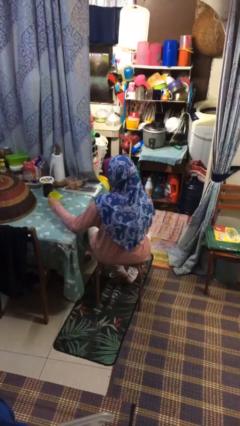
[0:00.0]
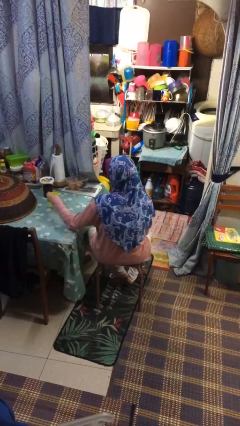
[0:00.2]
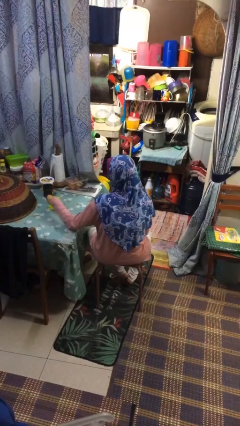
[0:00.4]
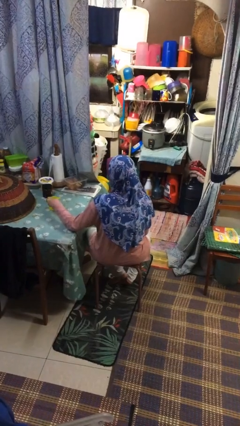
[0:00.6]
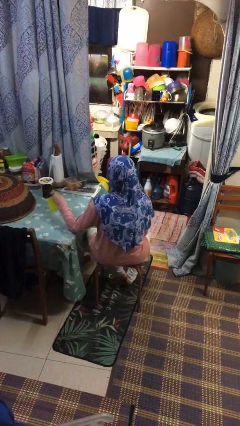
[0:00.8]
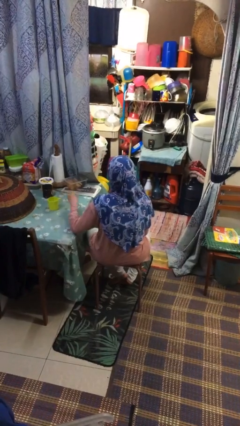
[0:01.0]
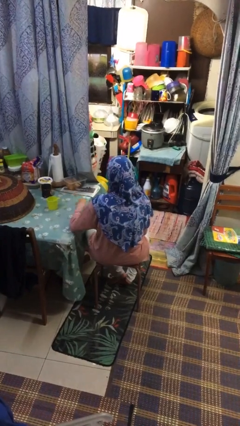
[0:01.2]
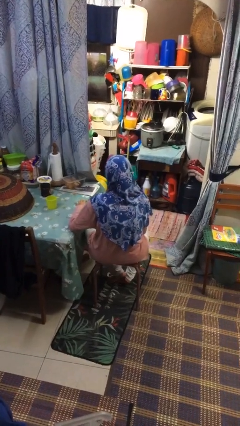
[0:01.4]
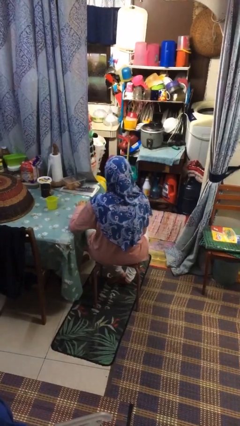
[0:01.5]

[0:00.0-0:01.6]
person sets upright glass

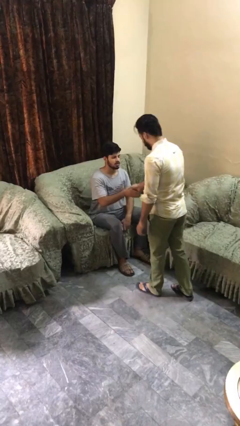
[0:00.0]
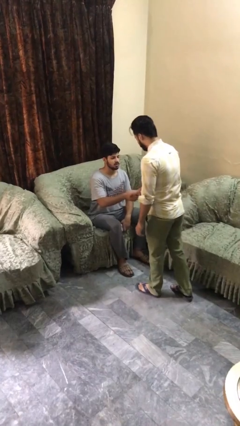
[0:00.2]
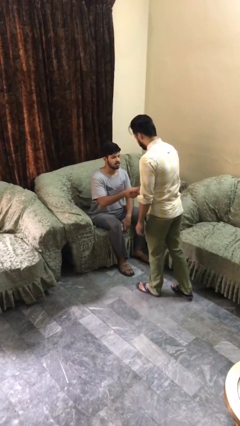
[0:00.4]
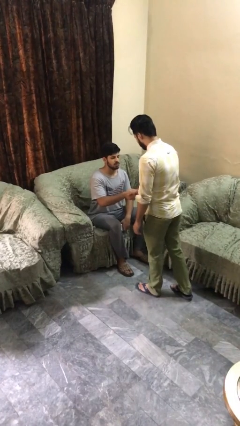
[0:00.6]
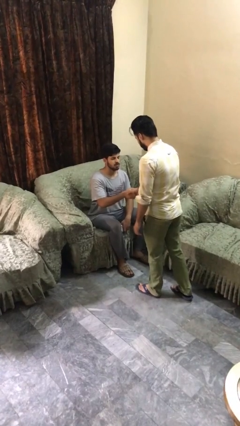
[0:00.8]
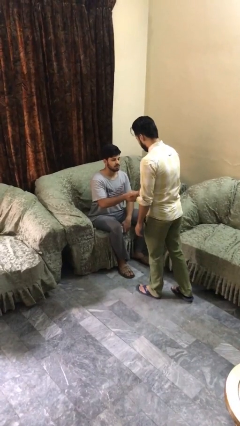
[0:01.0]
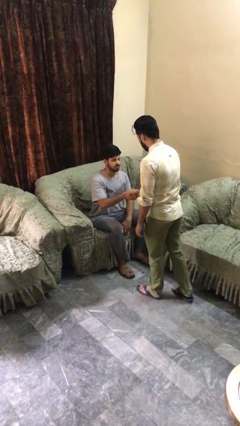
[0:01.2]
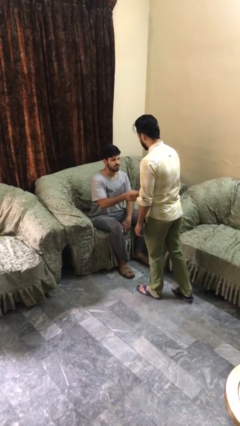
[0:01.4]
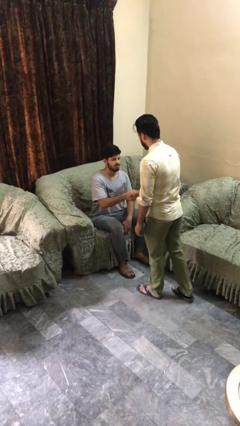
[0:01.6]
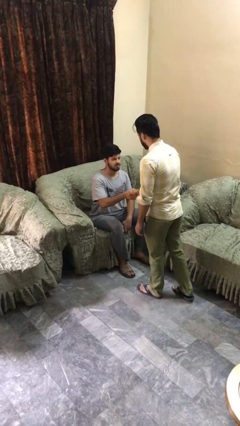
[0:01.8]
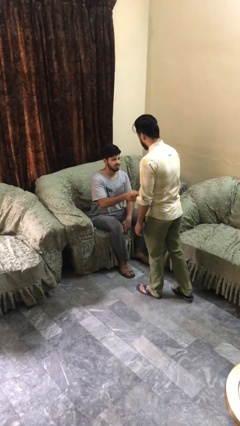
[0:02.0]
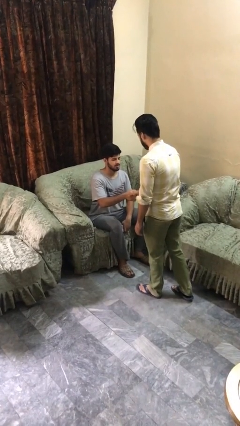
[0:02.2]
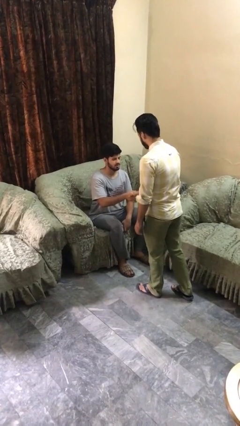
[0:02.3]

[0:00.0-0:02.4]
person shakes hand

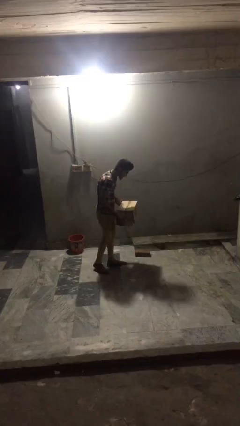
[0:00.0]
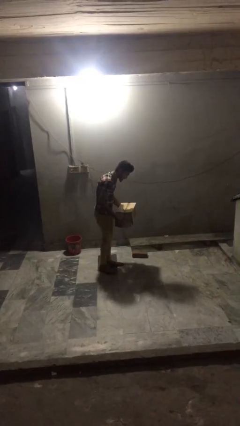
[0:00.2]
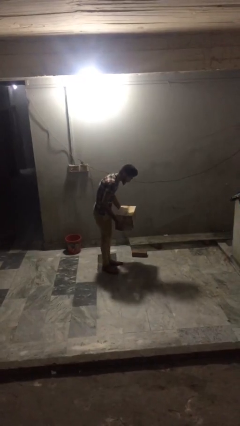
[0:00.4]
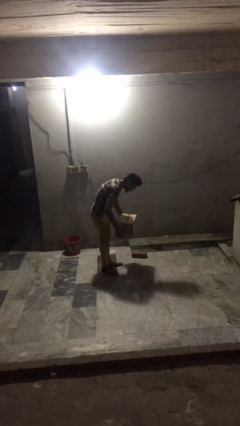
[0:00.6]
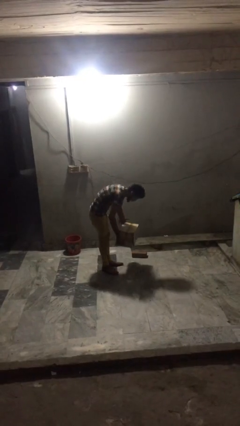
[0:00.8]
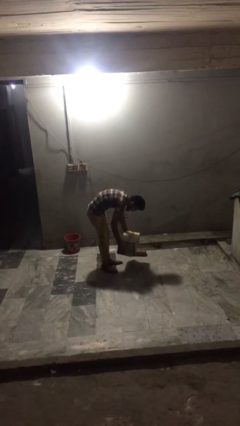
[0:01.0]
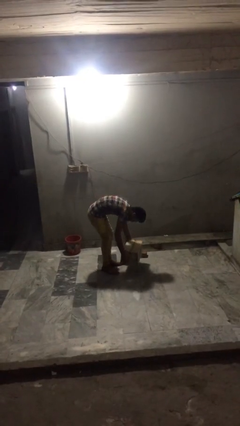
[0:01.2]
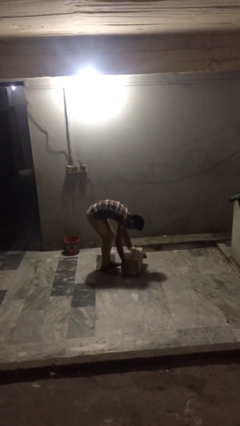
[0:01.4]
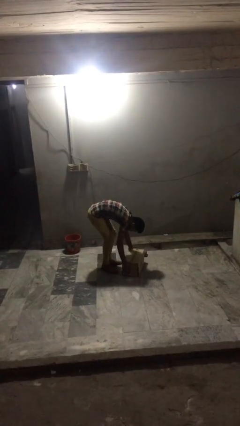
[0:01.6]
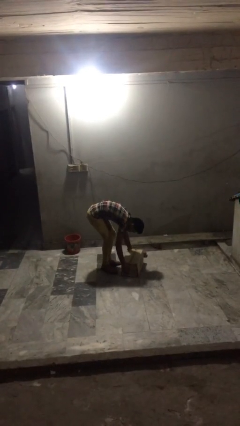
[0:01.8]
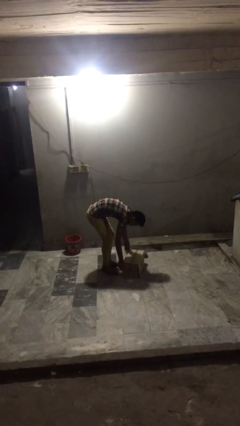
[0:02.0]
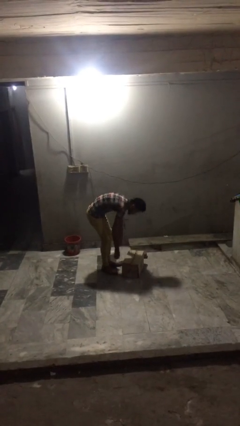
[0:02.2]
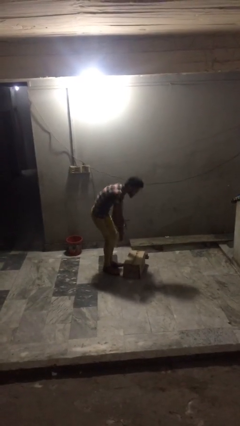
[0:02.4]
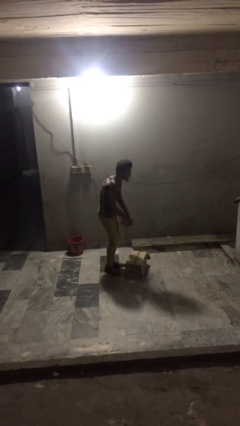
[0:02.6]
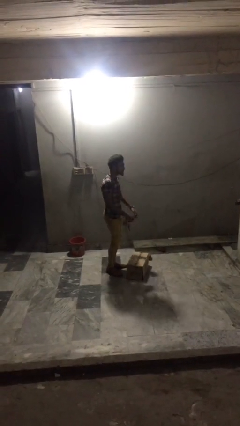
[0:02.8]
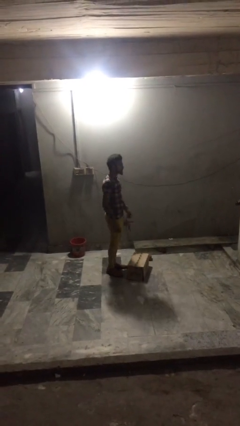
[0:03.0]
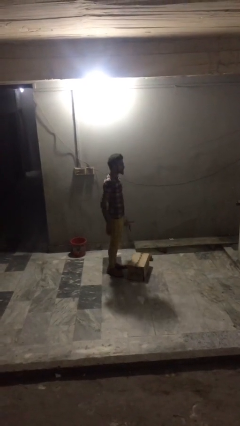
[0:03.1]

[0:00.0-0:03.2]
person puts down object on floor

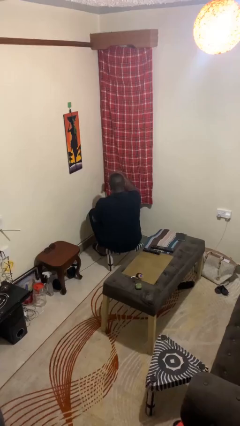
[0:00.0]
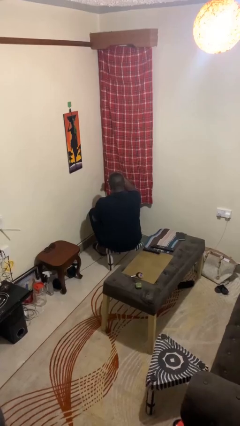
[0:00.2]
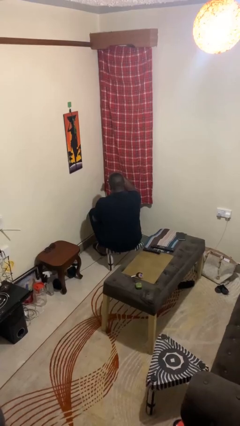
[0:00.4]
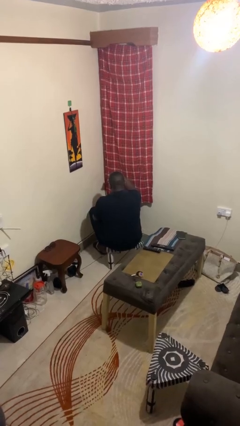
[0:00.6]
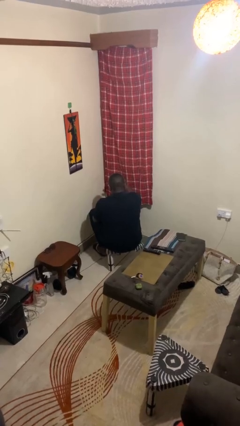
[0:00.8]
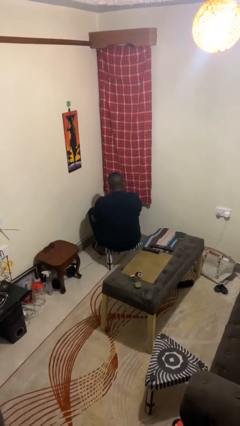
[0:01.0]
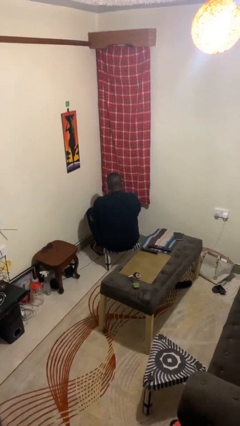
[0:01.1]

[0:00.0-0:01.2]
person gestures swipe down

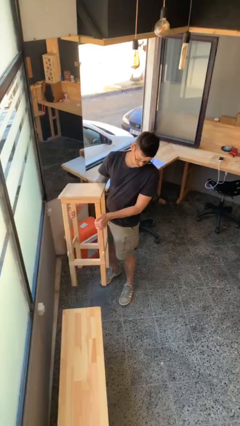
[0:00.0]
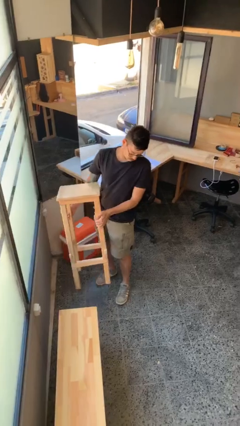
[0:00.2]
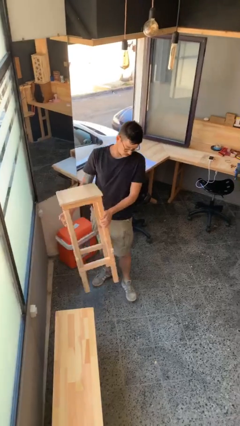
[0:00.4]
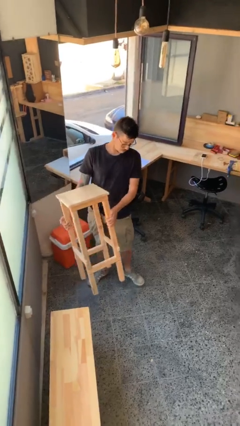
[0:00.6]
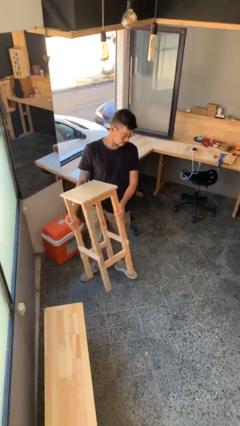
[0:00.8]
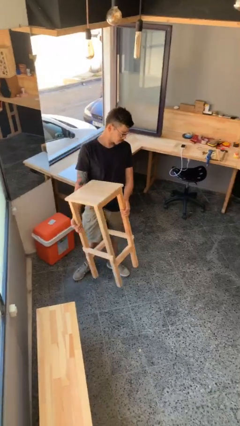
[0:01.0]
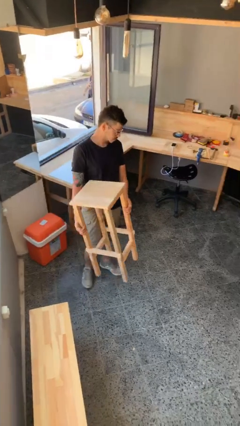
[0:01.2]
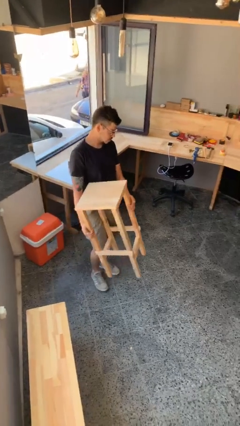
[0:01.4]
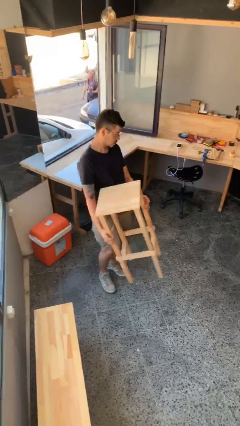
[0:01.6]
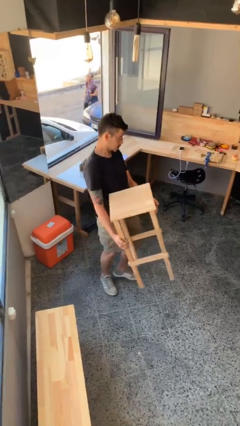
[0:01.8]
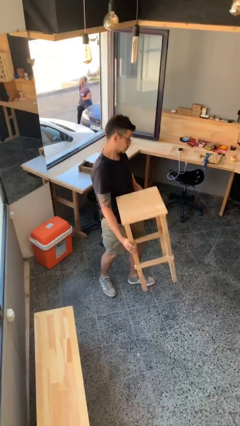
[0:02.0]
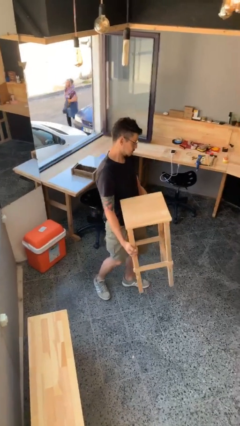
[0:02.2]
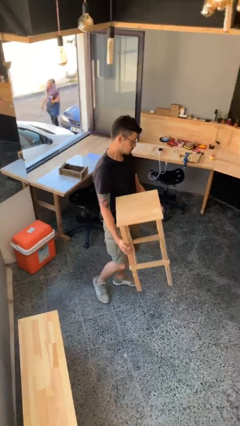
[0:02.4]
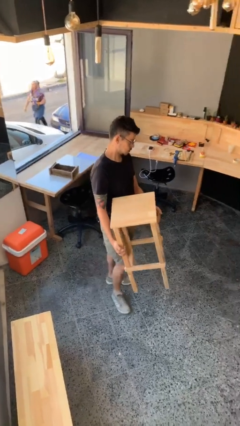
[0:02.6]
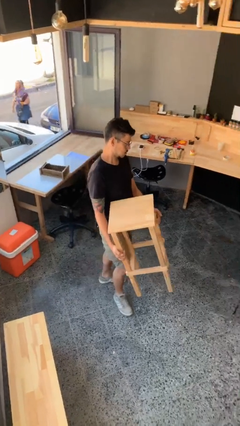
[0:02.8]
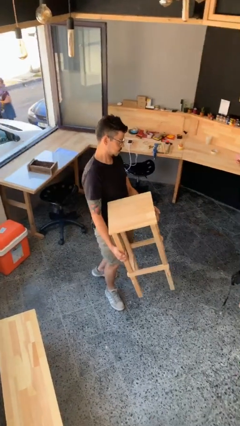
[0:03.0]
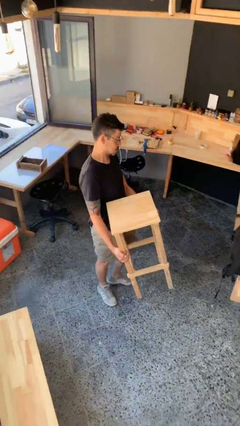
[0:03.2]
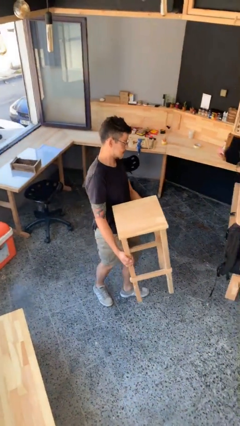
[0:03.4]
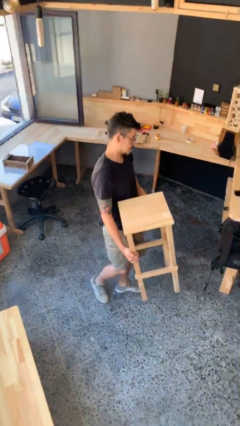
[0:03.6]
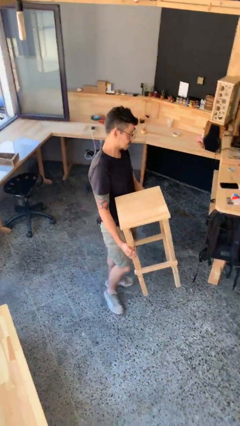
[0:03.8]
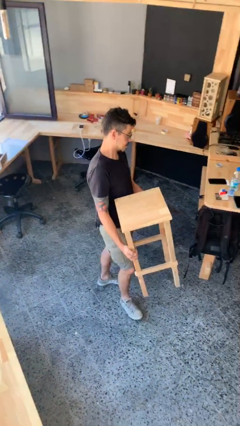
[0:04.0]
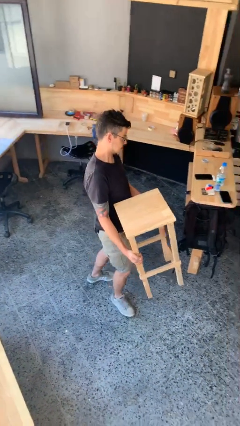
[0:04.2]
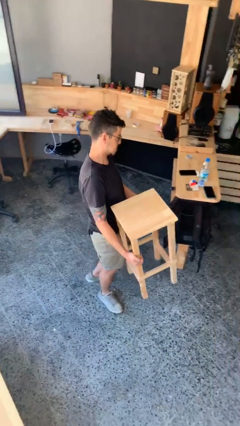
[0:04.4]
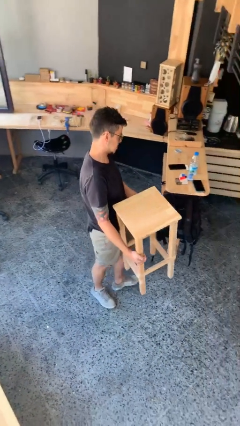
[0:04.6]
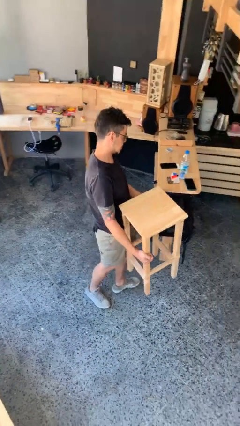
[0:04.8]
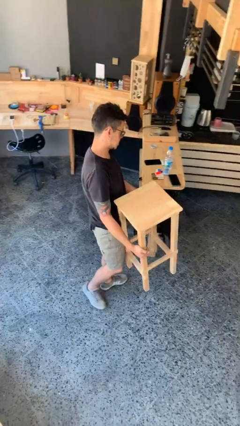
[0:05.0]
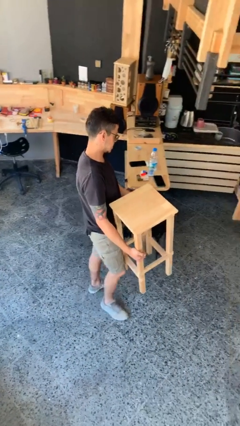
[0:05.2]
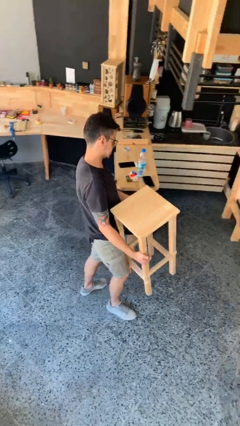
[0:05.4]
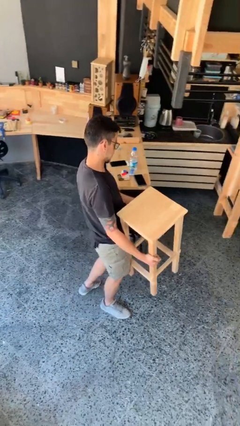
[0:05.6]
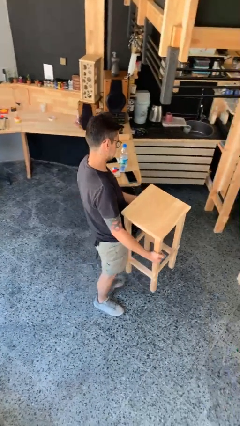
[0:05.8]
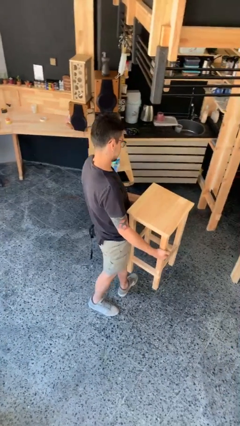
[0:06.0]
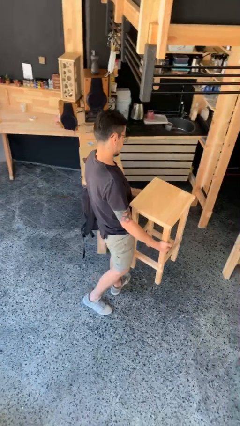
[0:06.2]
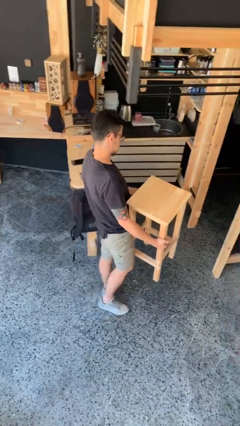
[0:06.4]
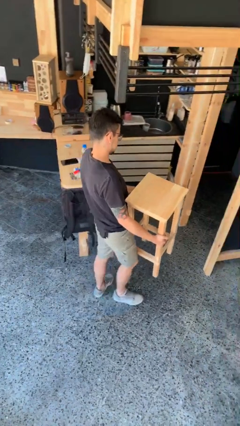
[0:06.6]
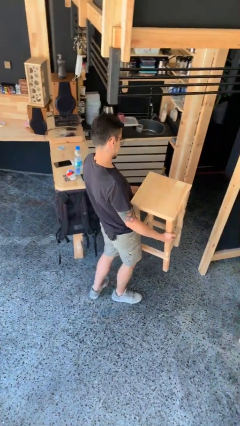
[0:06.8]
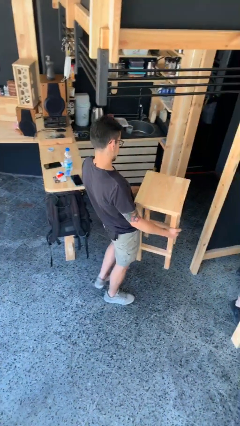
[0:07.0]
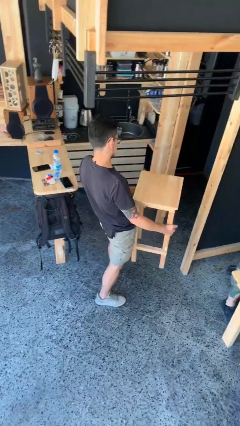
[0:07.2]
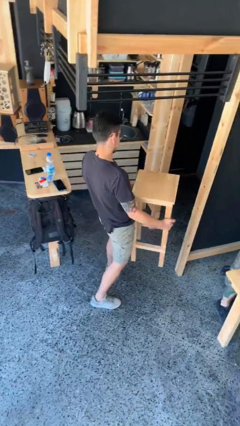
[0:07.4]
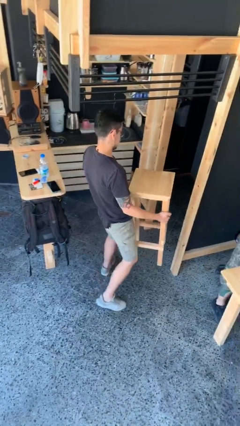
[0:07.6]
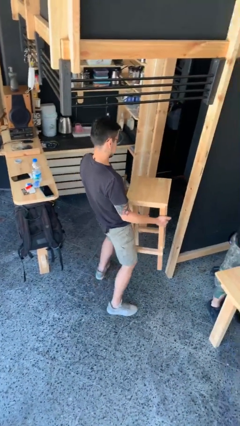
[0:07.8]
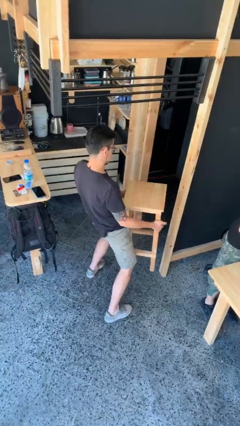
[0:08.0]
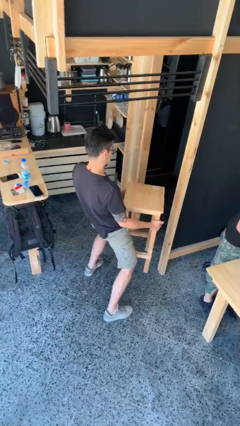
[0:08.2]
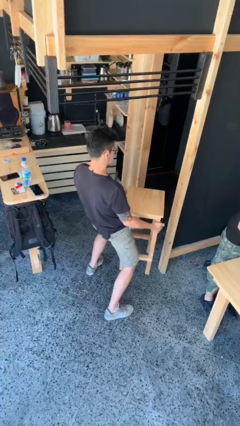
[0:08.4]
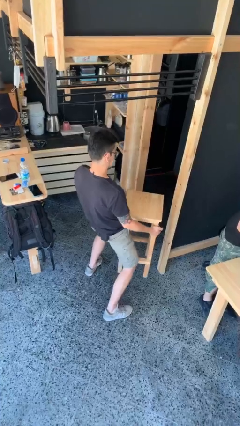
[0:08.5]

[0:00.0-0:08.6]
person carries heavy object

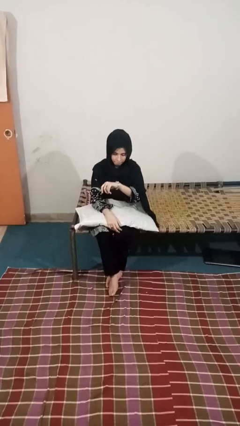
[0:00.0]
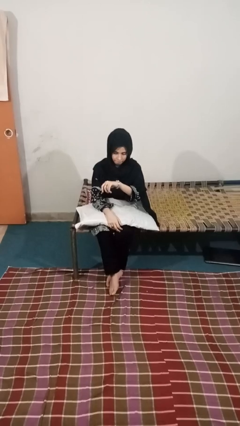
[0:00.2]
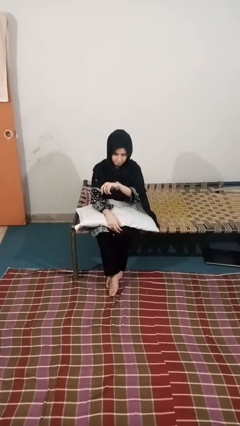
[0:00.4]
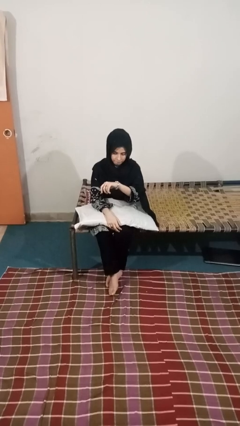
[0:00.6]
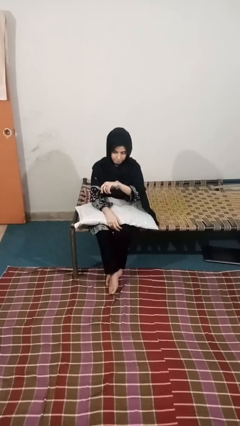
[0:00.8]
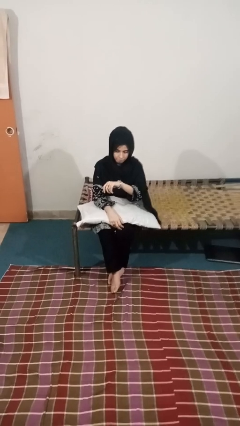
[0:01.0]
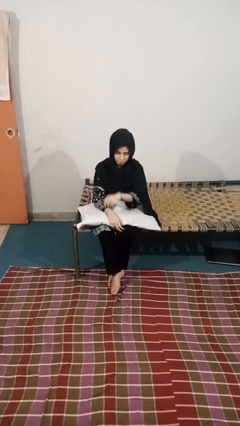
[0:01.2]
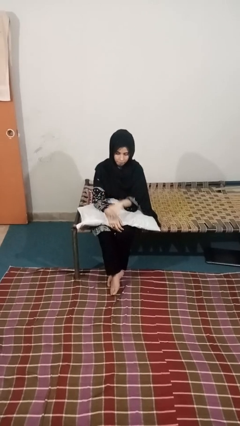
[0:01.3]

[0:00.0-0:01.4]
person looks at wristwatch
